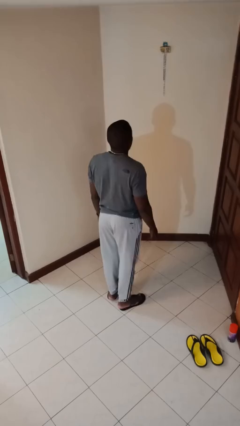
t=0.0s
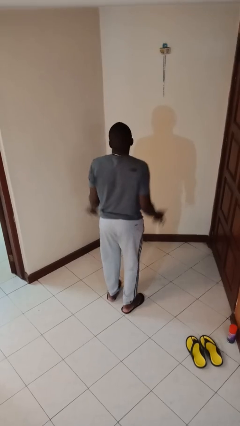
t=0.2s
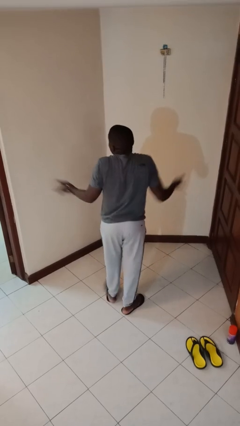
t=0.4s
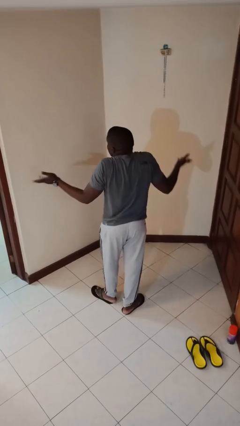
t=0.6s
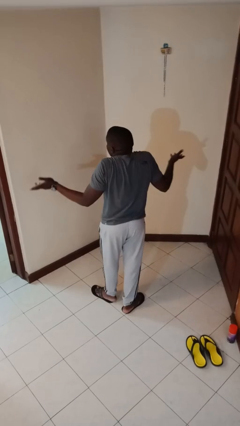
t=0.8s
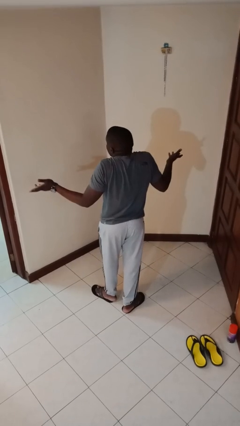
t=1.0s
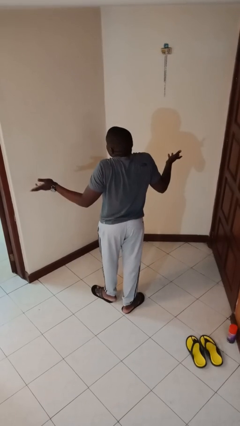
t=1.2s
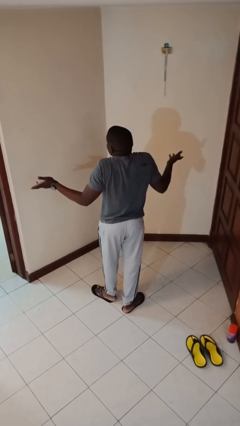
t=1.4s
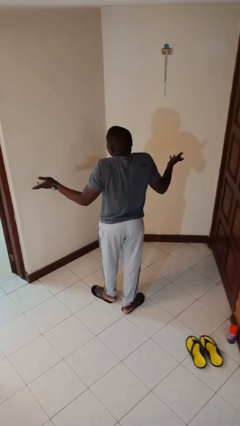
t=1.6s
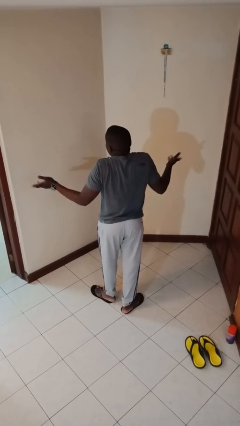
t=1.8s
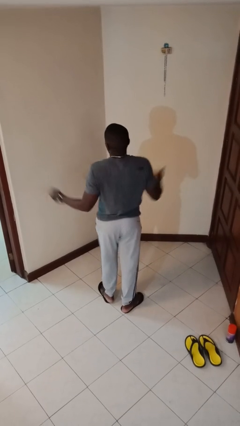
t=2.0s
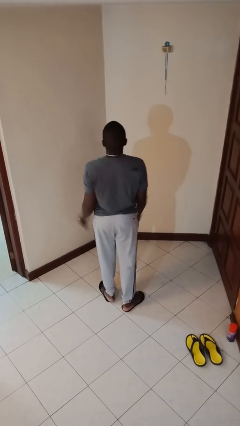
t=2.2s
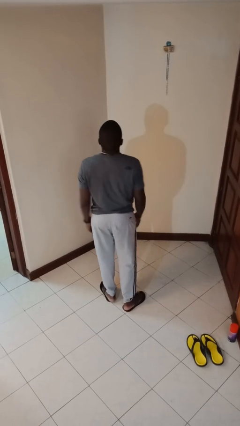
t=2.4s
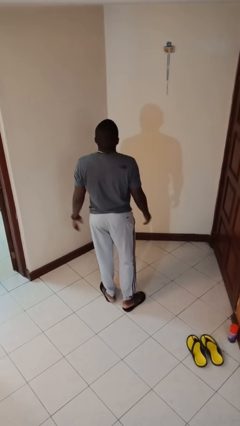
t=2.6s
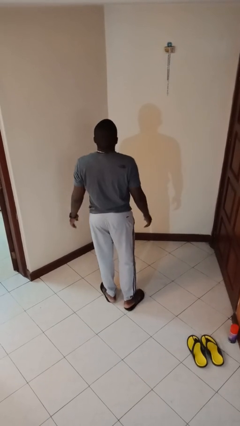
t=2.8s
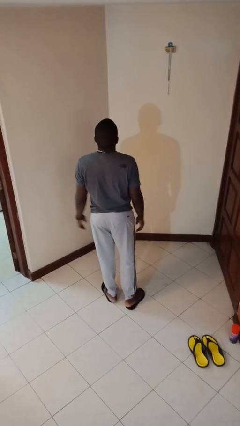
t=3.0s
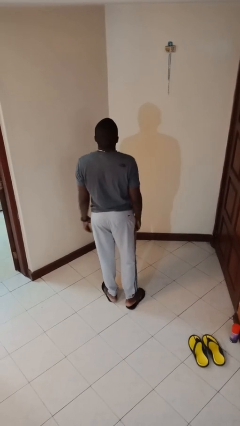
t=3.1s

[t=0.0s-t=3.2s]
person shrugs

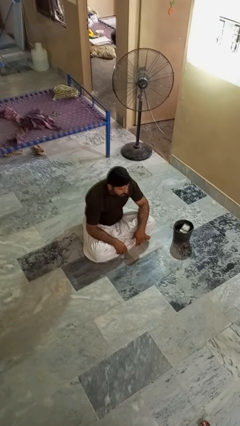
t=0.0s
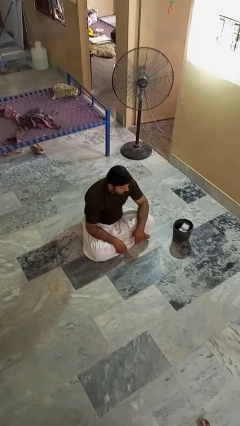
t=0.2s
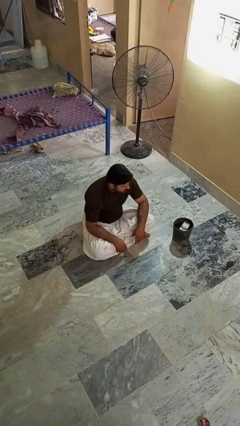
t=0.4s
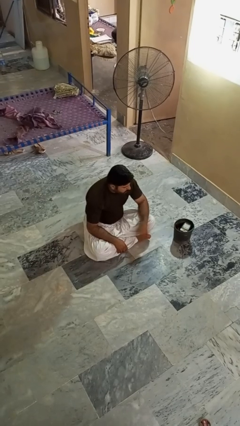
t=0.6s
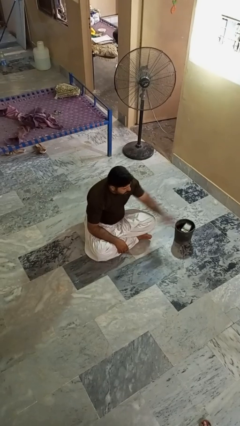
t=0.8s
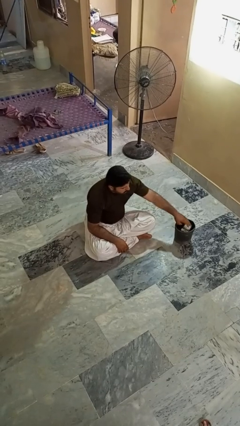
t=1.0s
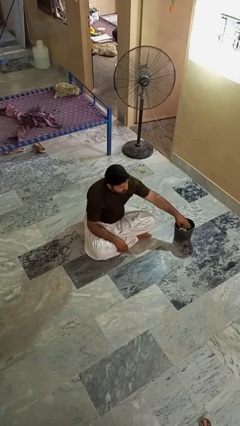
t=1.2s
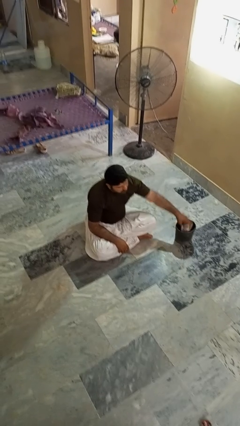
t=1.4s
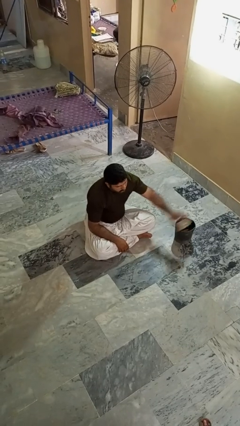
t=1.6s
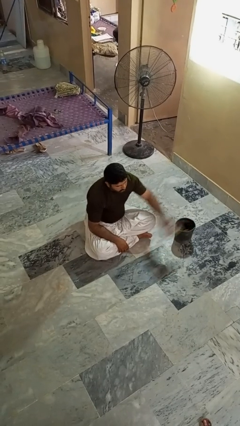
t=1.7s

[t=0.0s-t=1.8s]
person takes object from basket

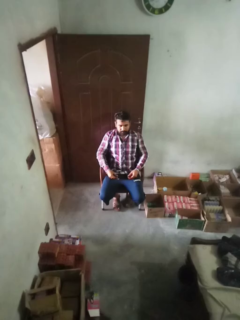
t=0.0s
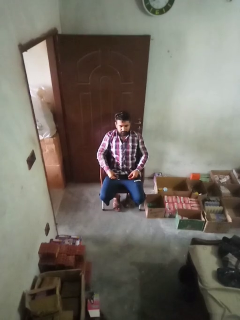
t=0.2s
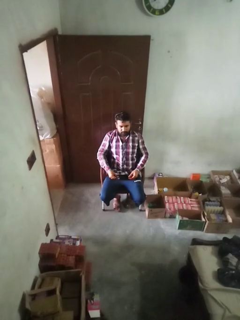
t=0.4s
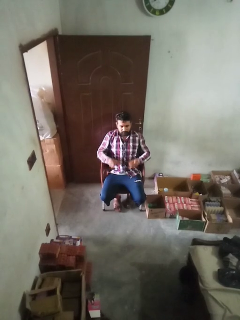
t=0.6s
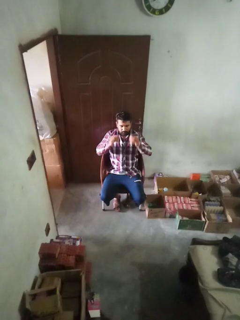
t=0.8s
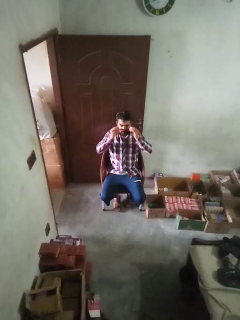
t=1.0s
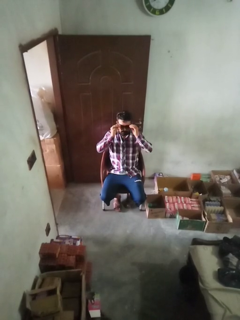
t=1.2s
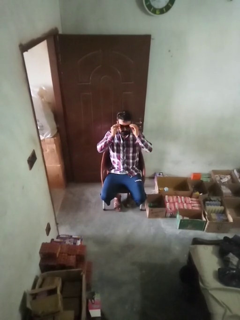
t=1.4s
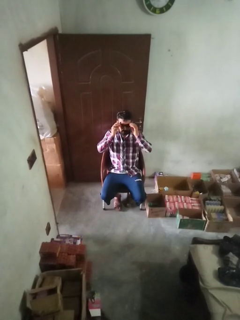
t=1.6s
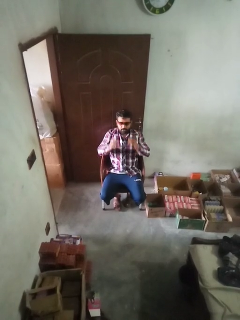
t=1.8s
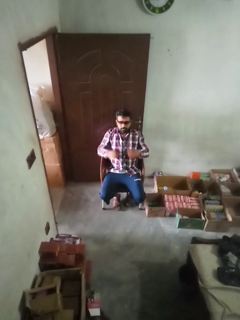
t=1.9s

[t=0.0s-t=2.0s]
person puts on sunglasses

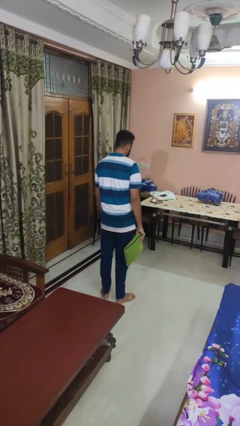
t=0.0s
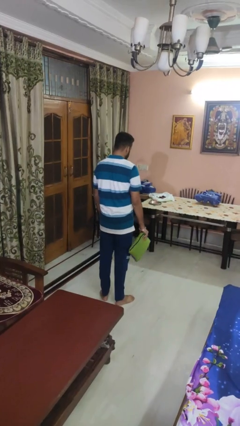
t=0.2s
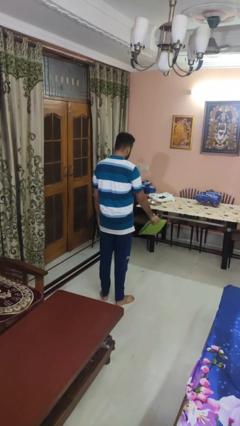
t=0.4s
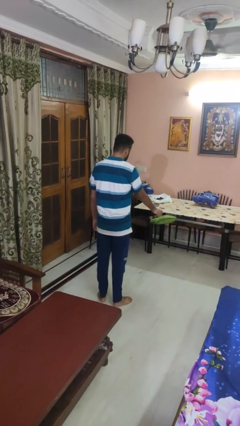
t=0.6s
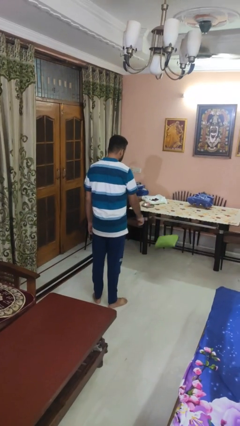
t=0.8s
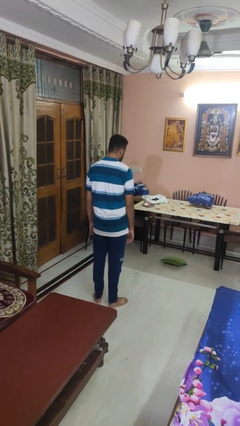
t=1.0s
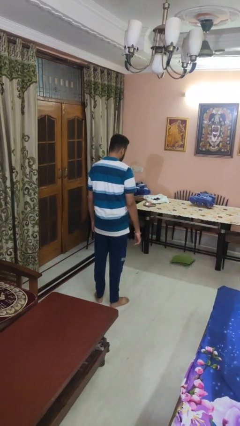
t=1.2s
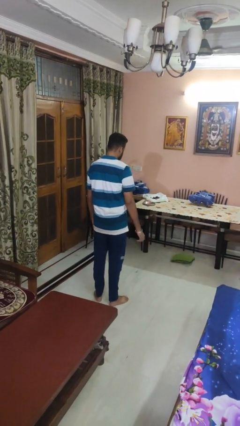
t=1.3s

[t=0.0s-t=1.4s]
person throws object to ground

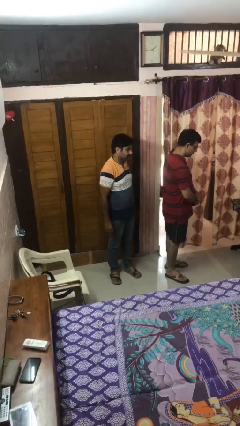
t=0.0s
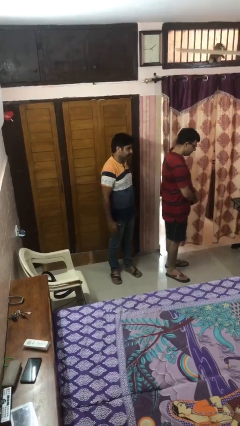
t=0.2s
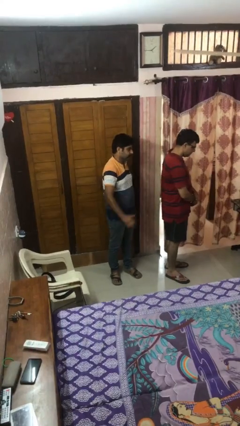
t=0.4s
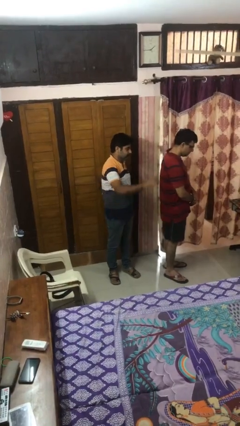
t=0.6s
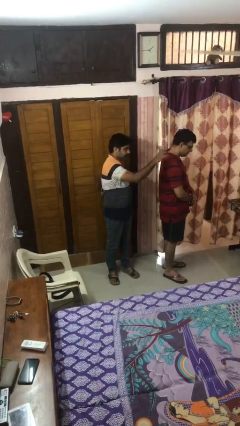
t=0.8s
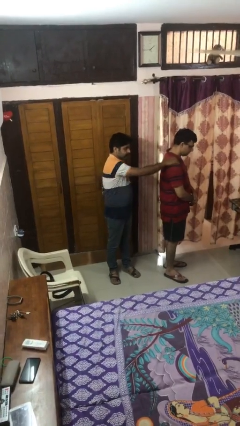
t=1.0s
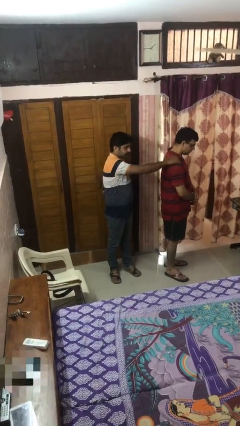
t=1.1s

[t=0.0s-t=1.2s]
person grabs person by shoulder

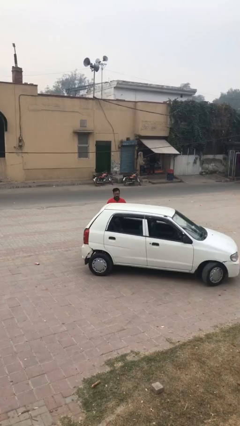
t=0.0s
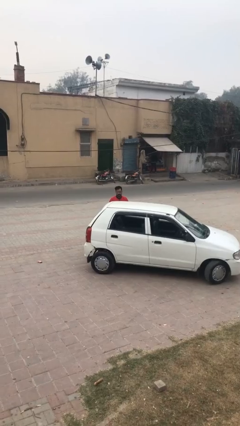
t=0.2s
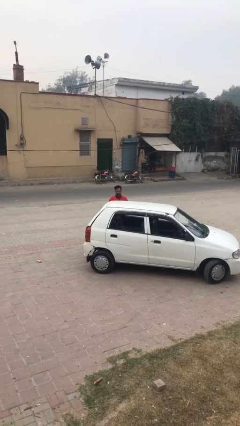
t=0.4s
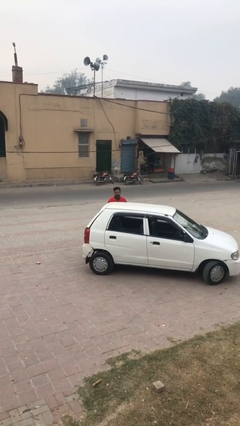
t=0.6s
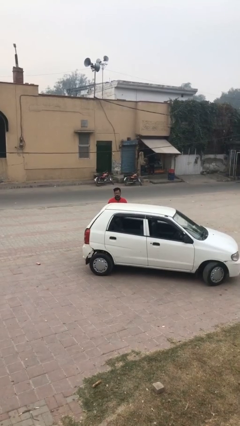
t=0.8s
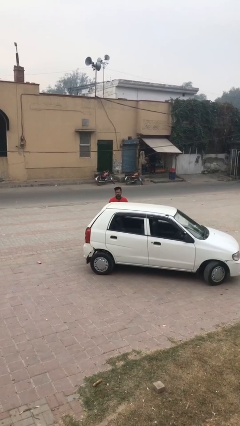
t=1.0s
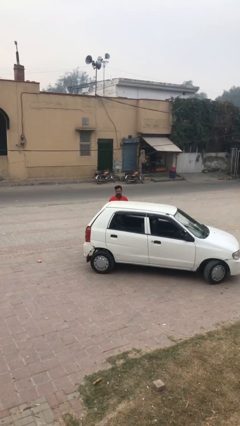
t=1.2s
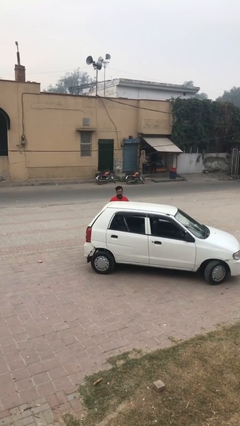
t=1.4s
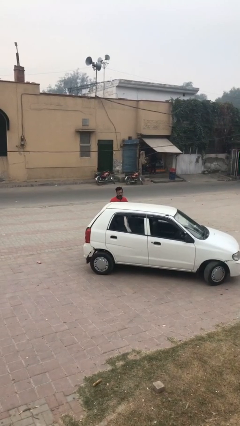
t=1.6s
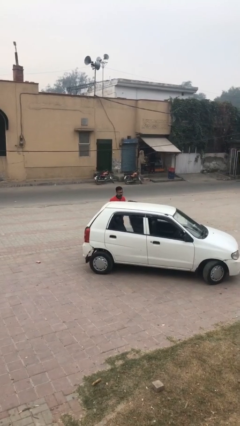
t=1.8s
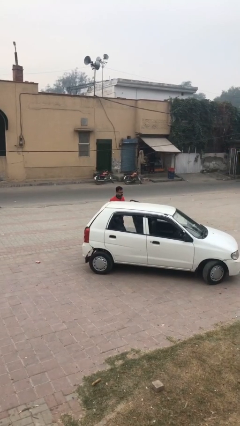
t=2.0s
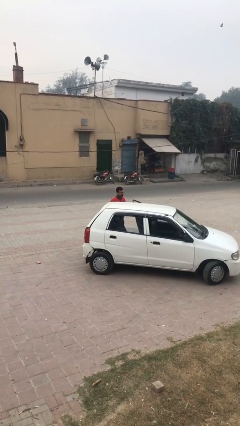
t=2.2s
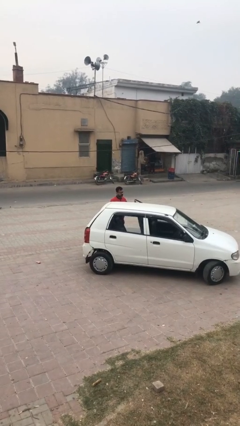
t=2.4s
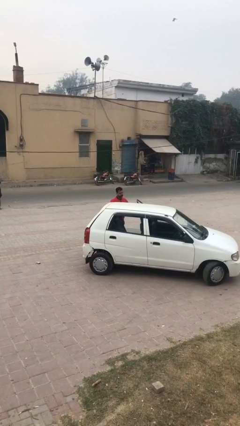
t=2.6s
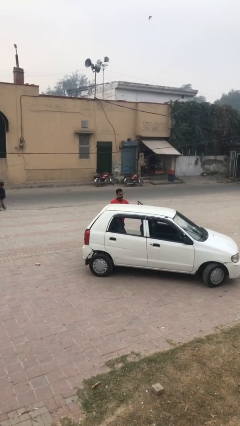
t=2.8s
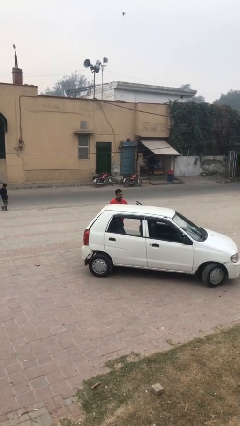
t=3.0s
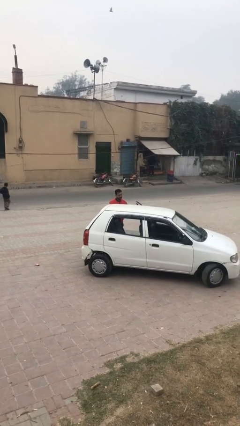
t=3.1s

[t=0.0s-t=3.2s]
person opens car door

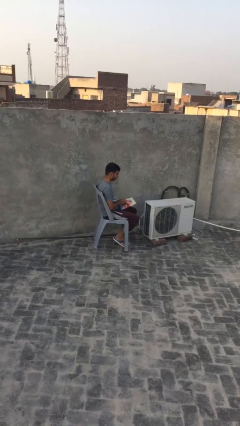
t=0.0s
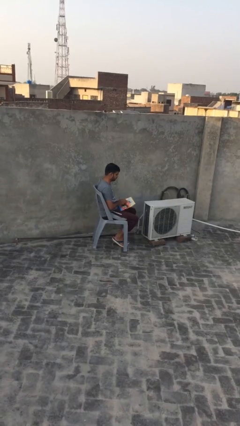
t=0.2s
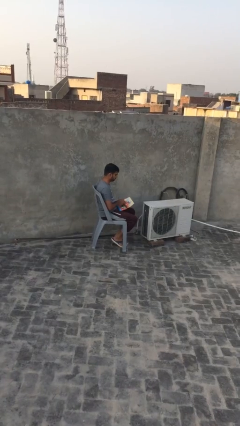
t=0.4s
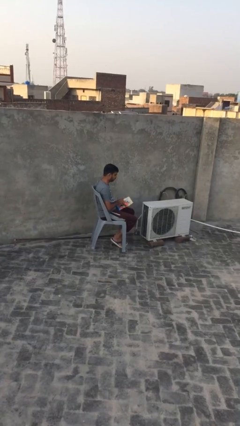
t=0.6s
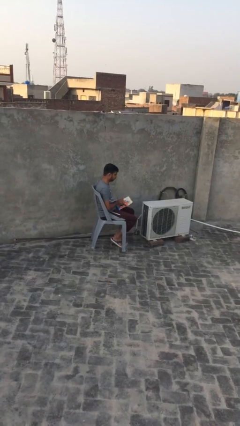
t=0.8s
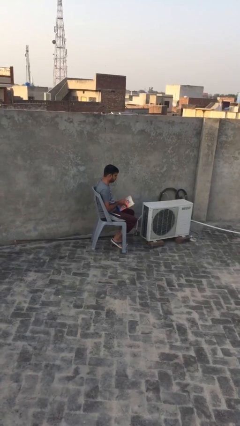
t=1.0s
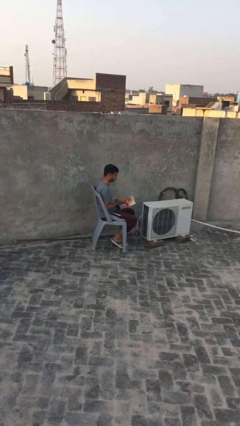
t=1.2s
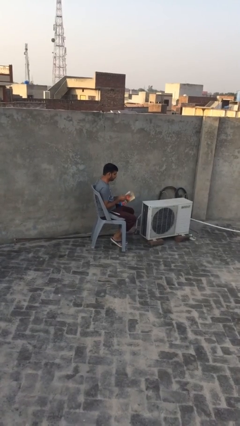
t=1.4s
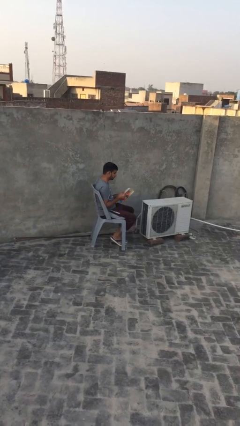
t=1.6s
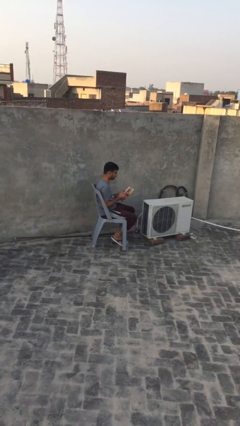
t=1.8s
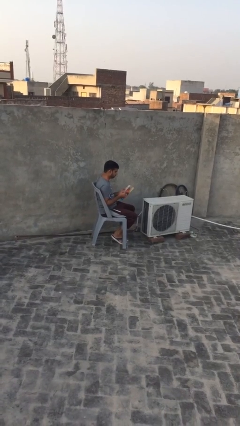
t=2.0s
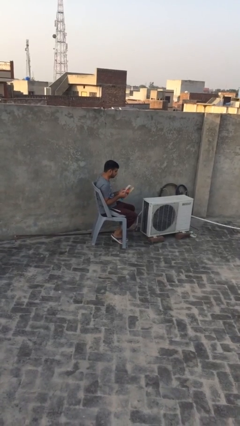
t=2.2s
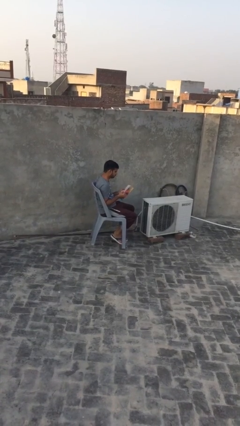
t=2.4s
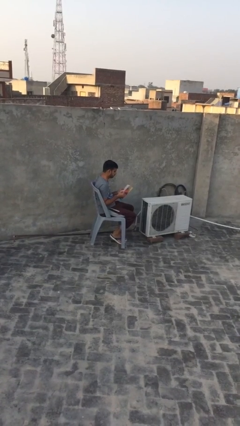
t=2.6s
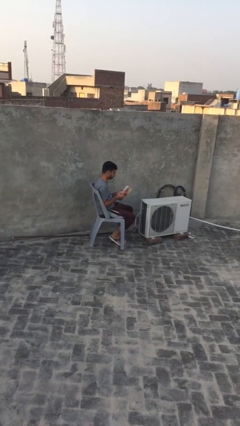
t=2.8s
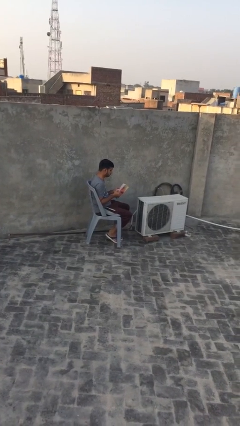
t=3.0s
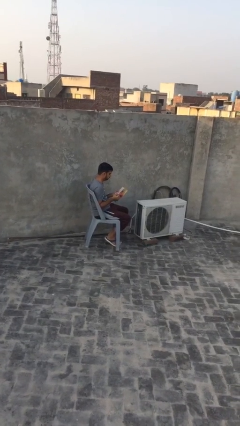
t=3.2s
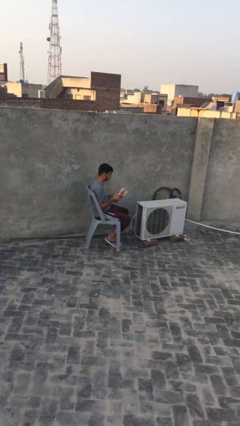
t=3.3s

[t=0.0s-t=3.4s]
person reads document

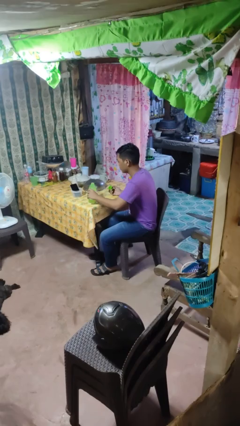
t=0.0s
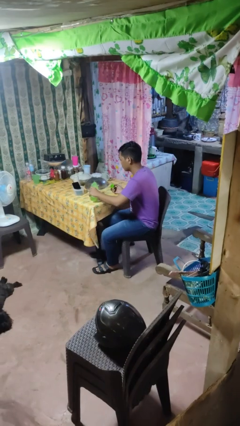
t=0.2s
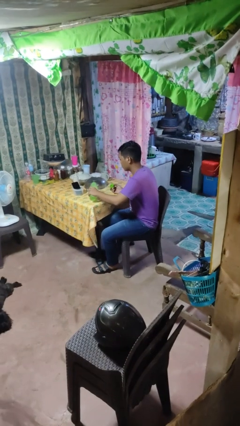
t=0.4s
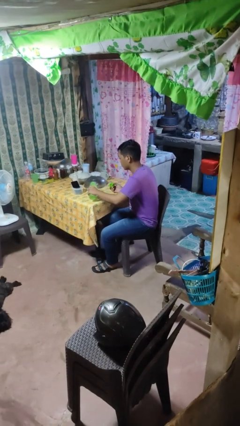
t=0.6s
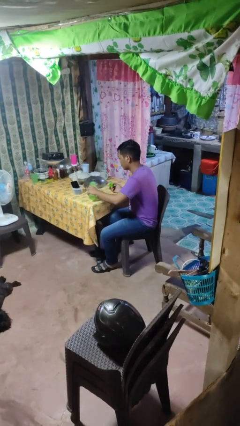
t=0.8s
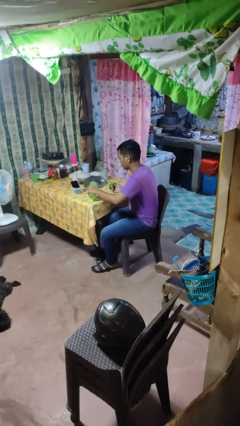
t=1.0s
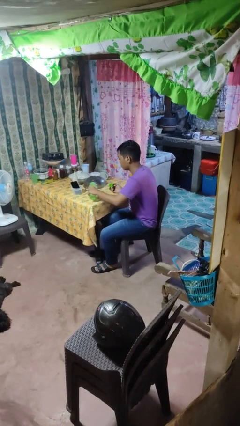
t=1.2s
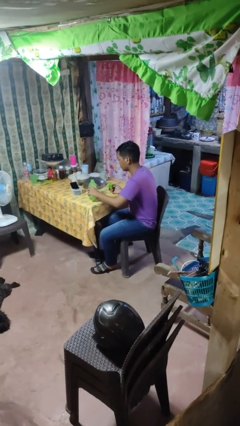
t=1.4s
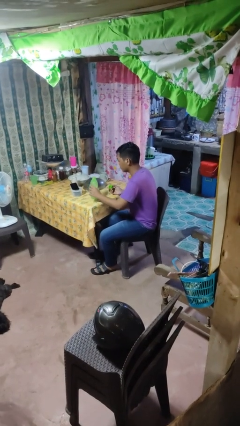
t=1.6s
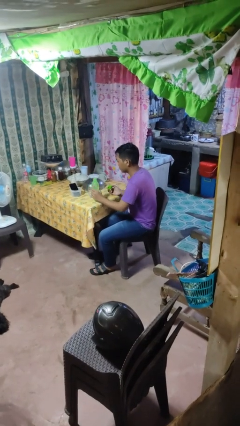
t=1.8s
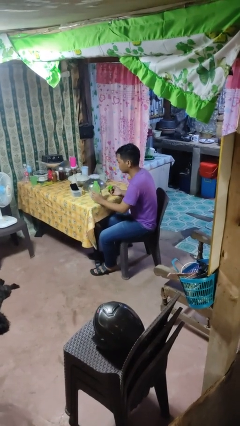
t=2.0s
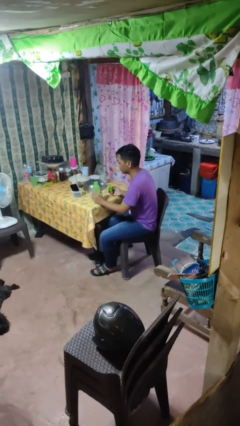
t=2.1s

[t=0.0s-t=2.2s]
person pours liquid into cup
